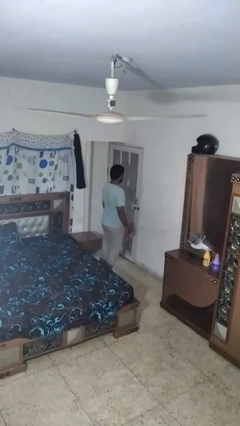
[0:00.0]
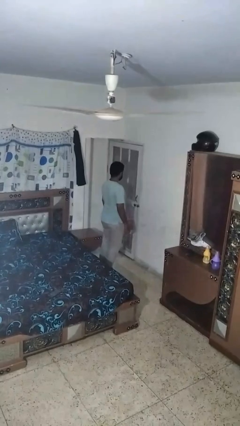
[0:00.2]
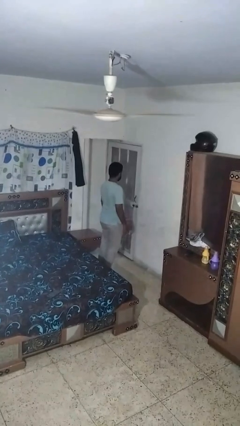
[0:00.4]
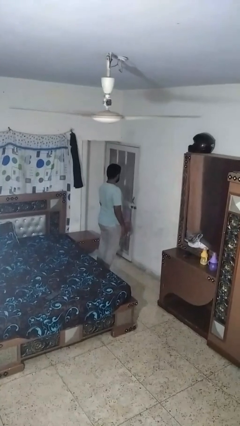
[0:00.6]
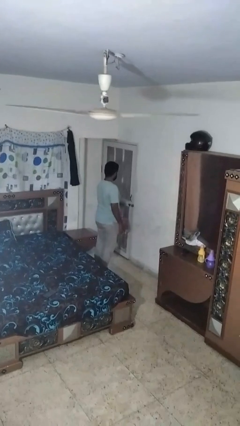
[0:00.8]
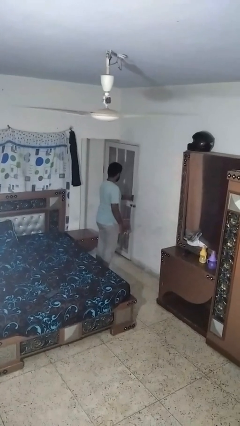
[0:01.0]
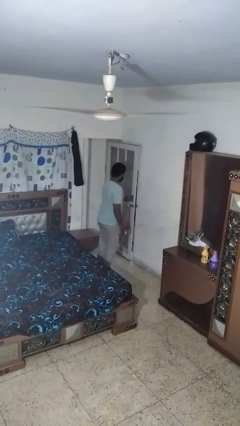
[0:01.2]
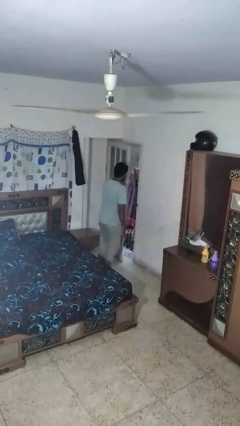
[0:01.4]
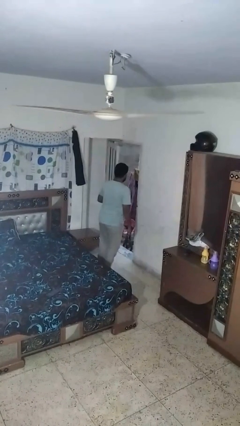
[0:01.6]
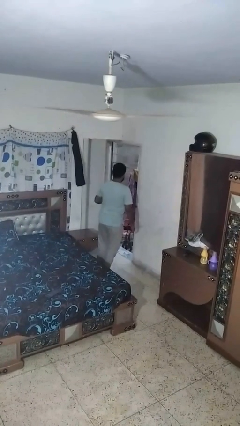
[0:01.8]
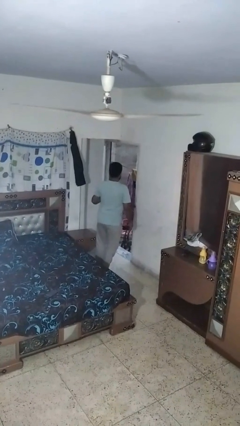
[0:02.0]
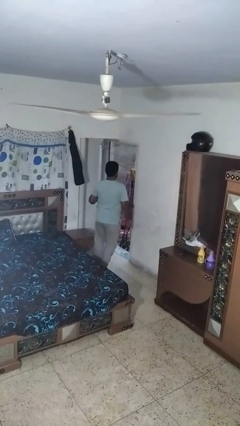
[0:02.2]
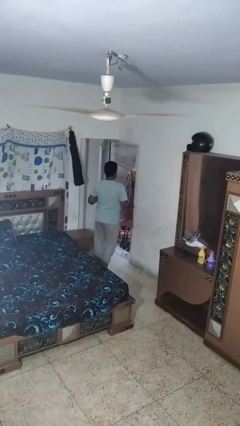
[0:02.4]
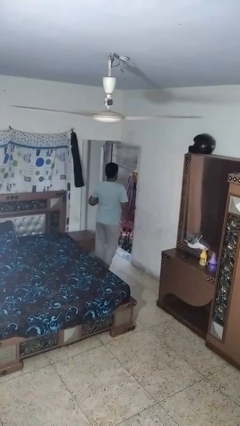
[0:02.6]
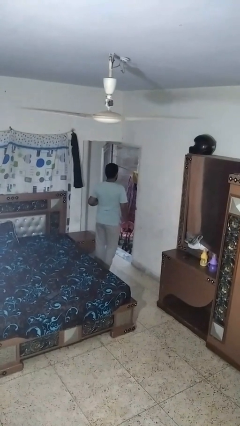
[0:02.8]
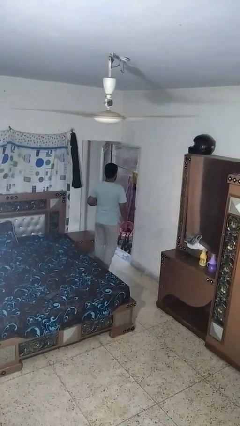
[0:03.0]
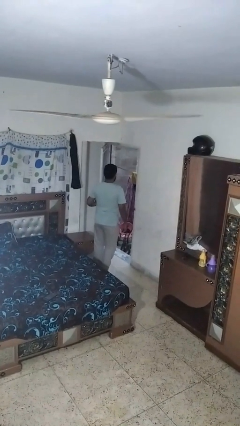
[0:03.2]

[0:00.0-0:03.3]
person opens gate

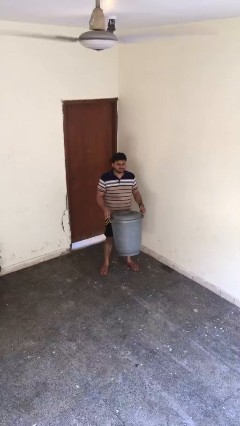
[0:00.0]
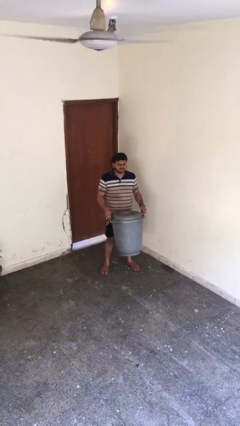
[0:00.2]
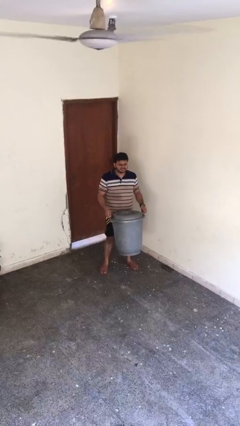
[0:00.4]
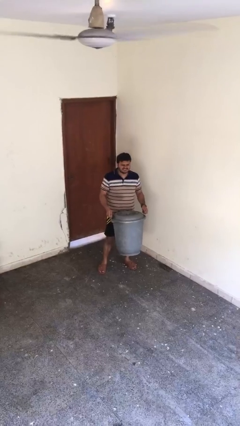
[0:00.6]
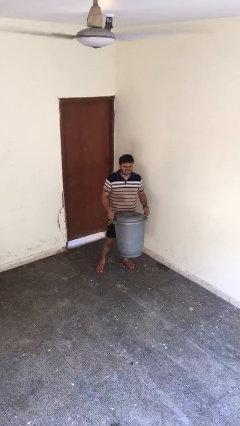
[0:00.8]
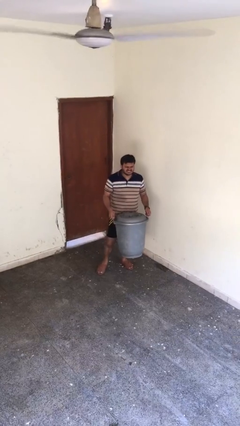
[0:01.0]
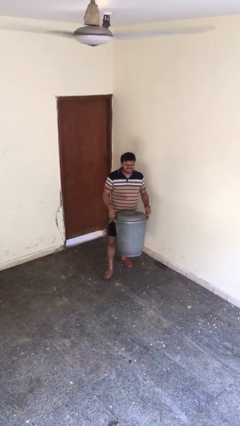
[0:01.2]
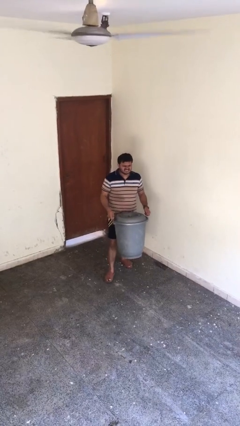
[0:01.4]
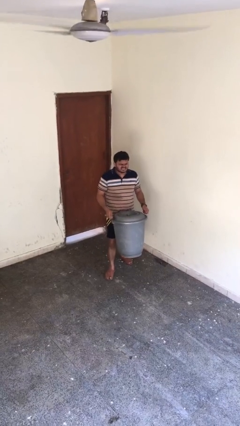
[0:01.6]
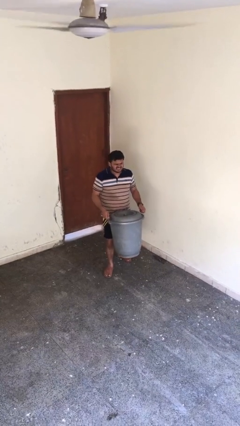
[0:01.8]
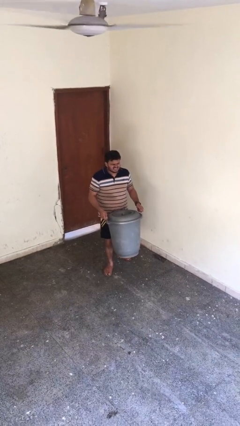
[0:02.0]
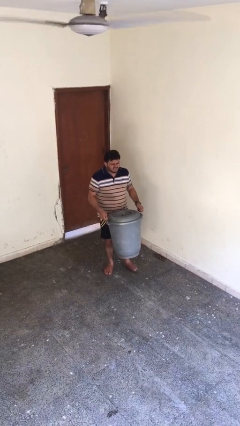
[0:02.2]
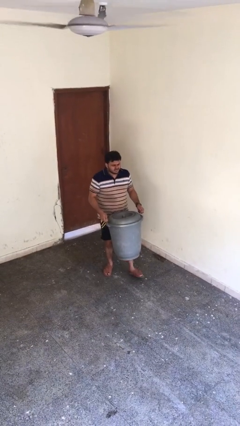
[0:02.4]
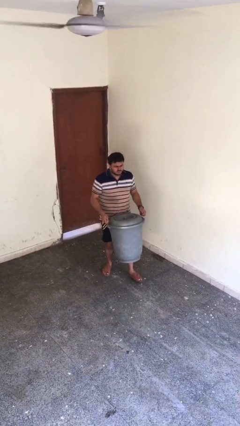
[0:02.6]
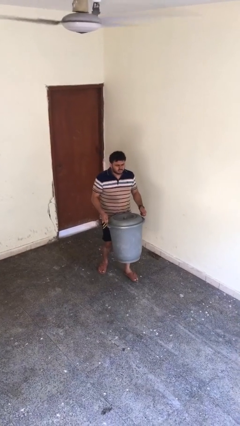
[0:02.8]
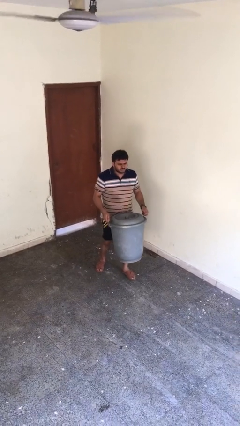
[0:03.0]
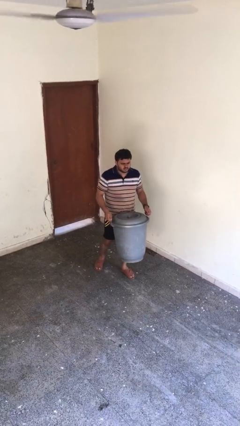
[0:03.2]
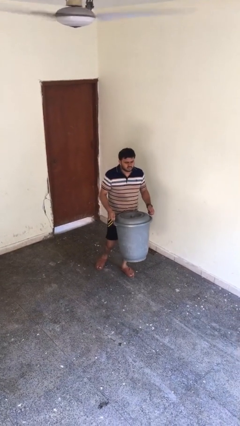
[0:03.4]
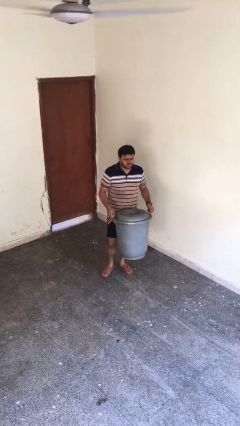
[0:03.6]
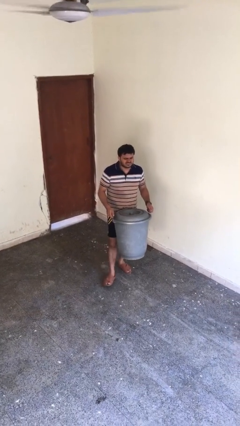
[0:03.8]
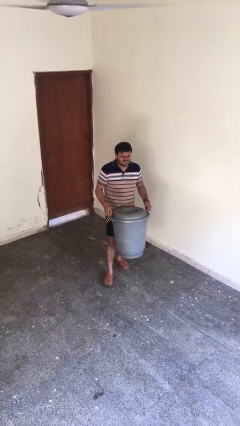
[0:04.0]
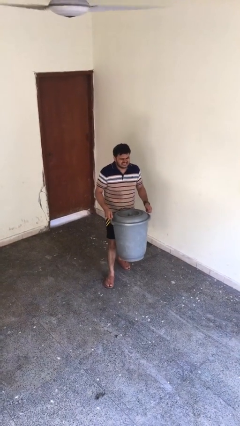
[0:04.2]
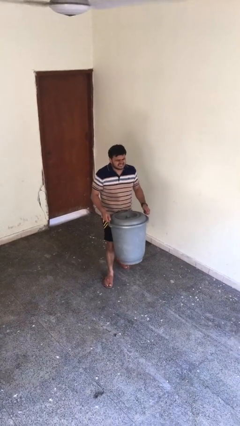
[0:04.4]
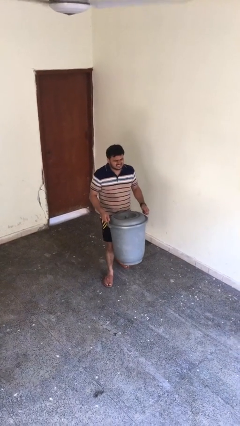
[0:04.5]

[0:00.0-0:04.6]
person carries heavy object

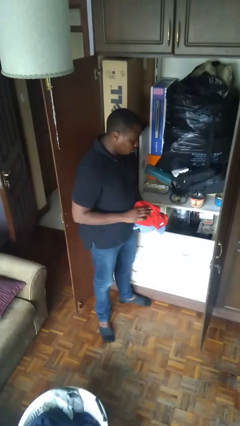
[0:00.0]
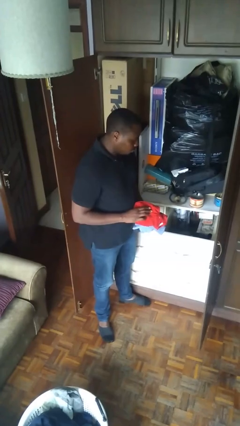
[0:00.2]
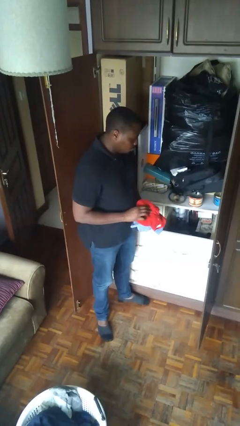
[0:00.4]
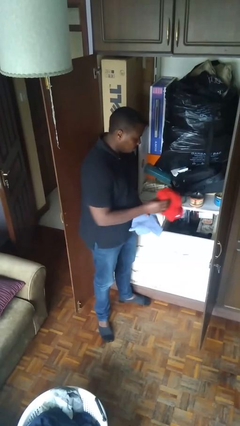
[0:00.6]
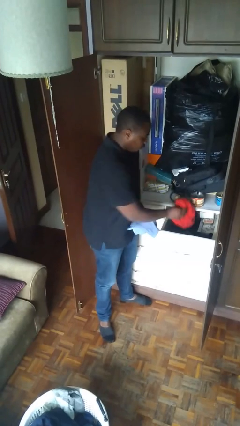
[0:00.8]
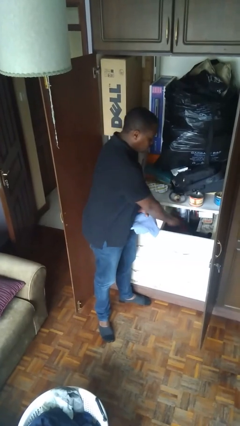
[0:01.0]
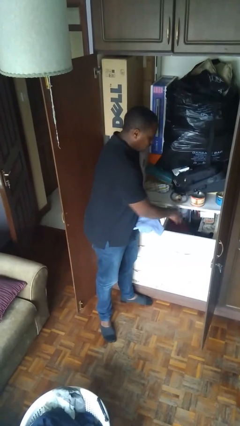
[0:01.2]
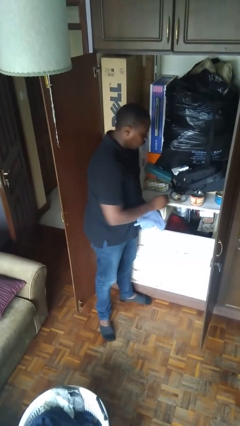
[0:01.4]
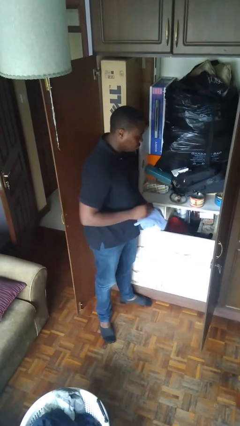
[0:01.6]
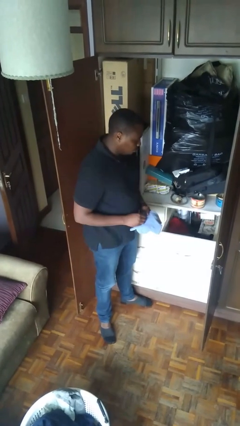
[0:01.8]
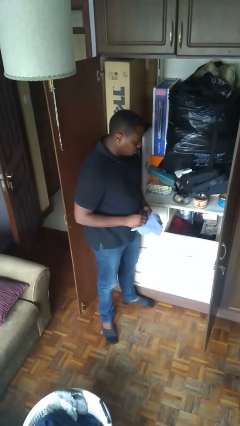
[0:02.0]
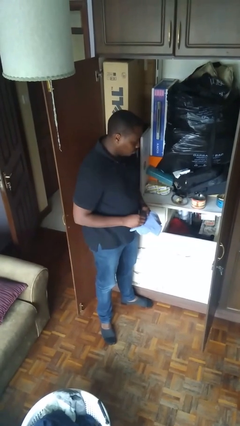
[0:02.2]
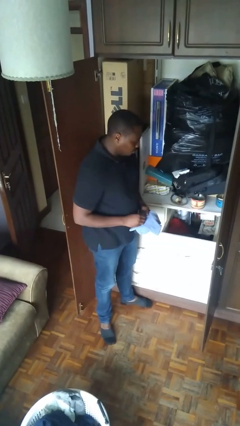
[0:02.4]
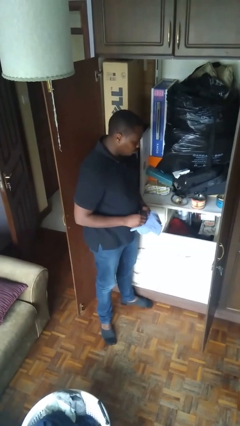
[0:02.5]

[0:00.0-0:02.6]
person puts clothes into dresser

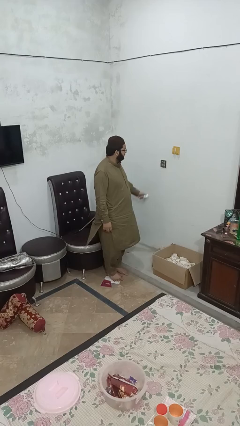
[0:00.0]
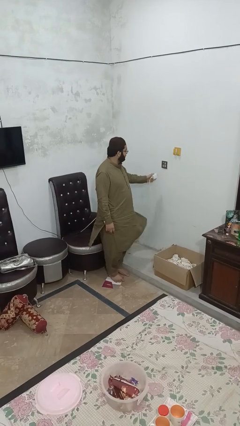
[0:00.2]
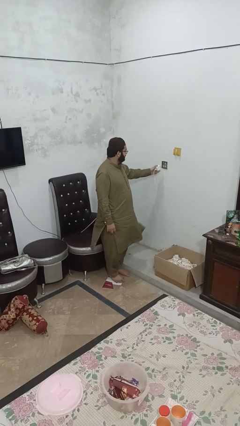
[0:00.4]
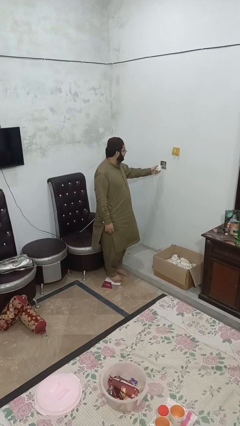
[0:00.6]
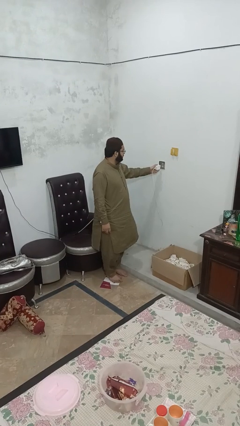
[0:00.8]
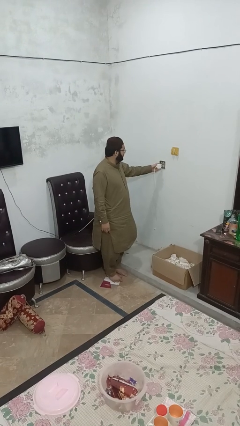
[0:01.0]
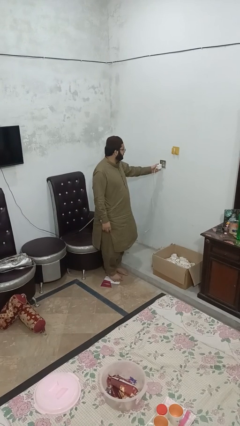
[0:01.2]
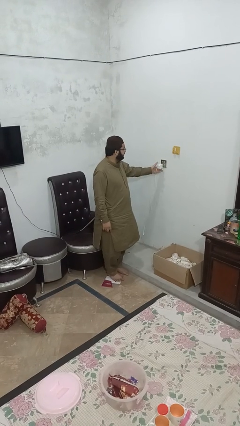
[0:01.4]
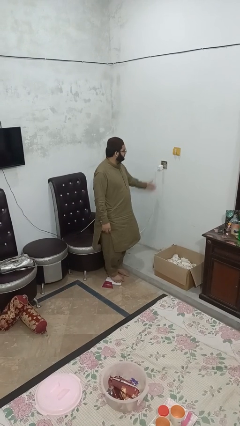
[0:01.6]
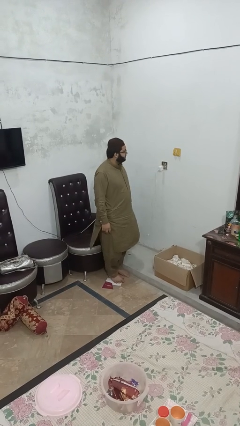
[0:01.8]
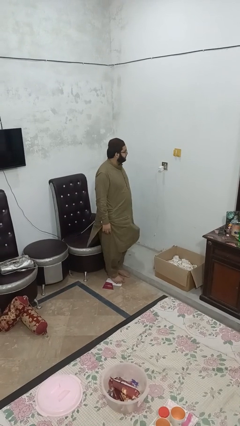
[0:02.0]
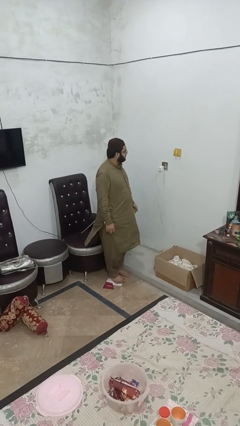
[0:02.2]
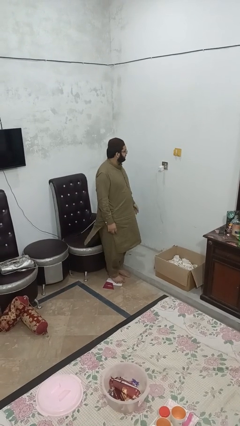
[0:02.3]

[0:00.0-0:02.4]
person plugs into electrical socket

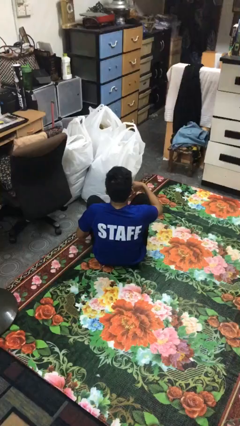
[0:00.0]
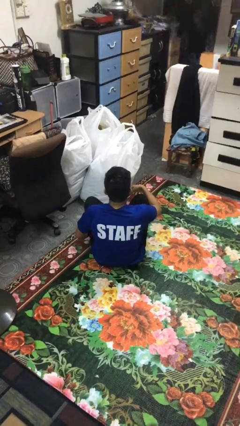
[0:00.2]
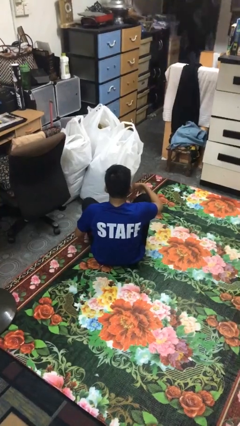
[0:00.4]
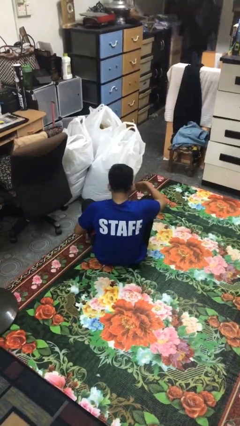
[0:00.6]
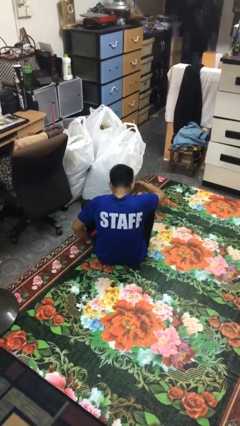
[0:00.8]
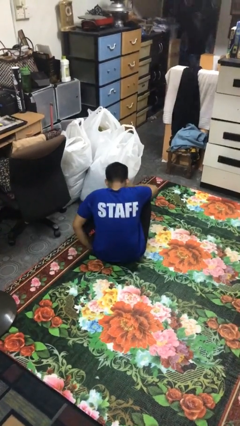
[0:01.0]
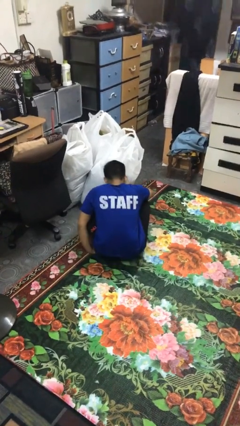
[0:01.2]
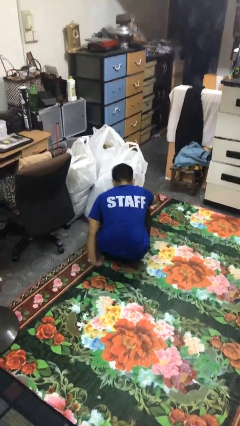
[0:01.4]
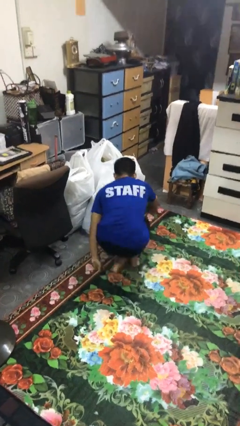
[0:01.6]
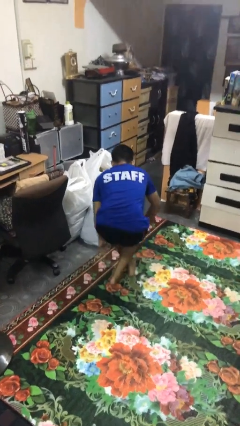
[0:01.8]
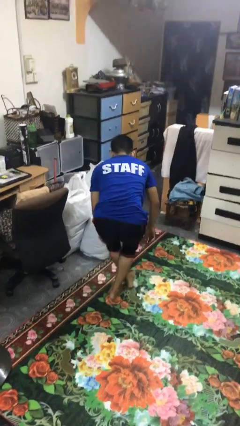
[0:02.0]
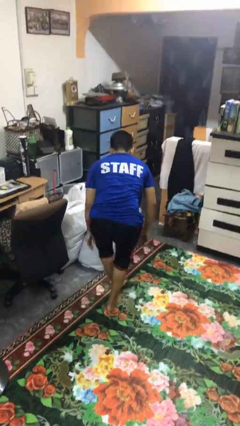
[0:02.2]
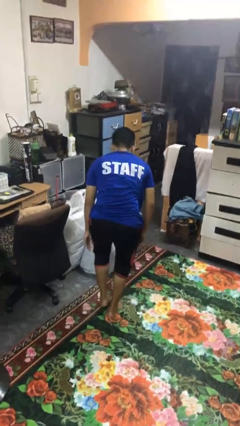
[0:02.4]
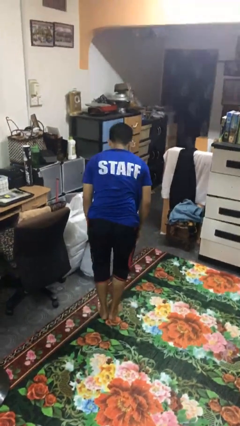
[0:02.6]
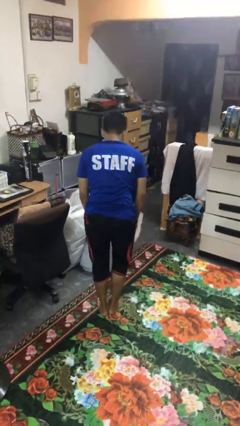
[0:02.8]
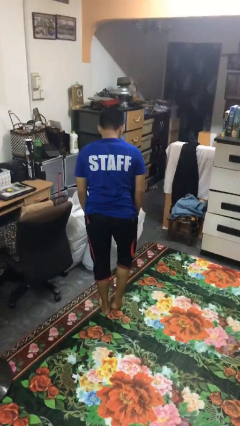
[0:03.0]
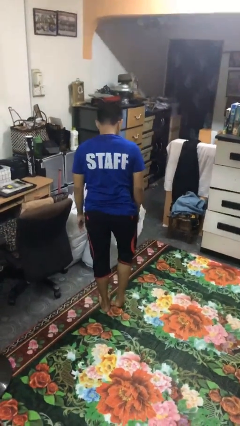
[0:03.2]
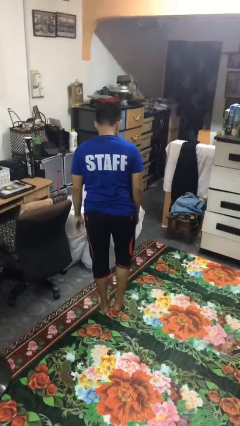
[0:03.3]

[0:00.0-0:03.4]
person stands up from floor

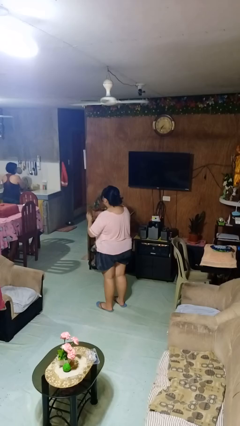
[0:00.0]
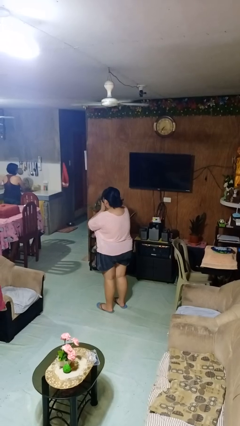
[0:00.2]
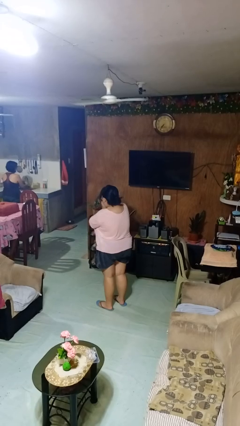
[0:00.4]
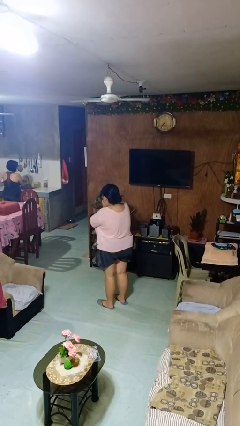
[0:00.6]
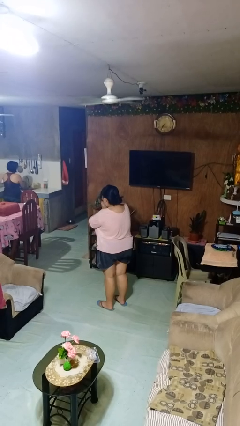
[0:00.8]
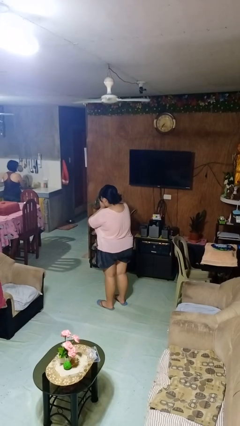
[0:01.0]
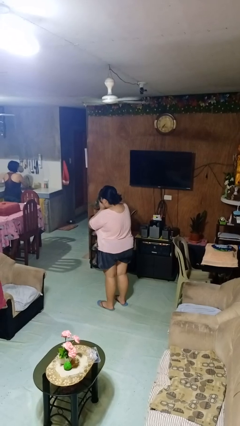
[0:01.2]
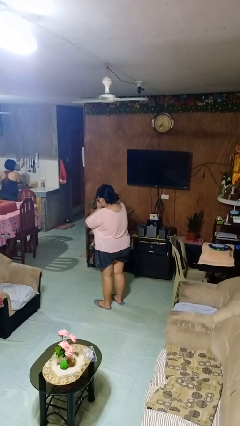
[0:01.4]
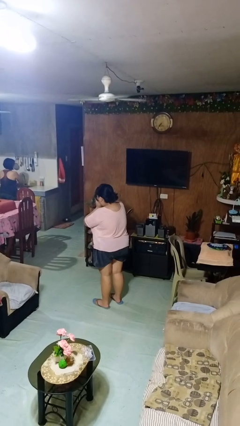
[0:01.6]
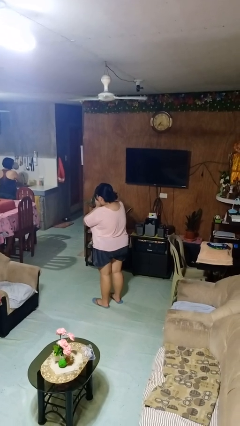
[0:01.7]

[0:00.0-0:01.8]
person blows into hands
